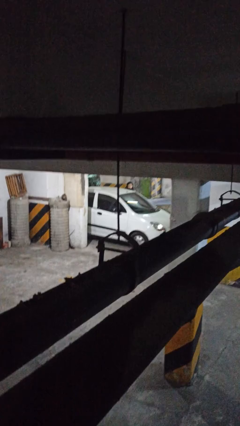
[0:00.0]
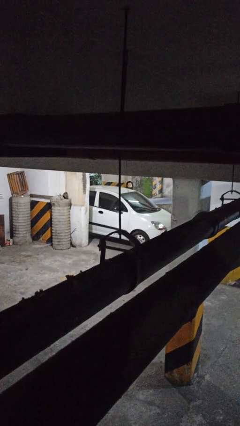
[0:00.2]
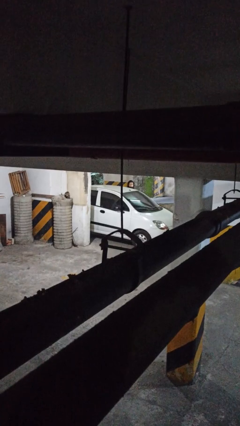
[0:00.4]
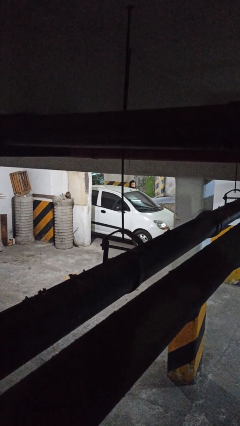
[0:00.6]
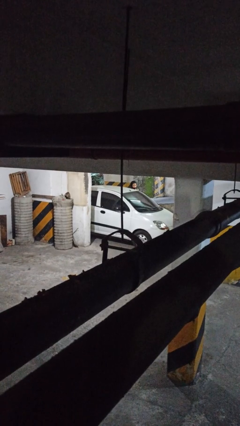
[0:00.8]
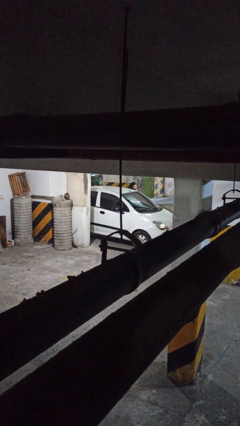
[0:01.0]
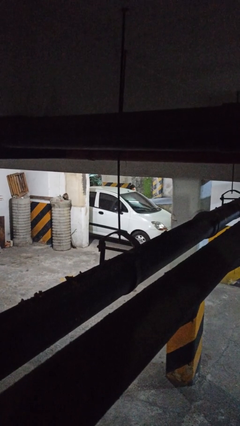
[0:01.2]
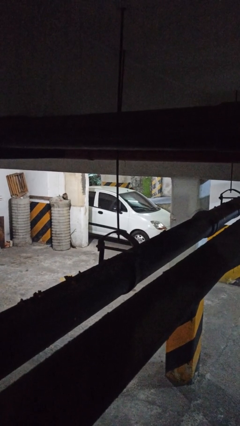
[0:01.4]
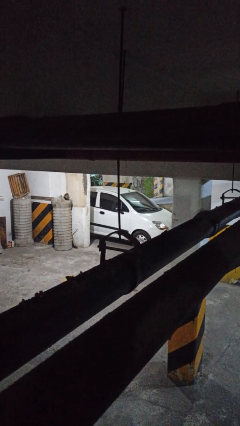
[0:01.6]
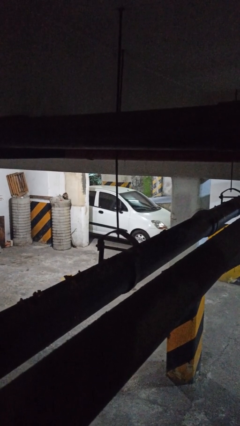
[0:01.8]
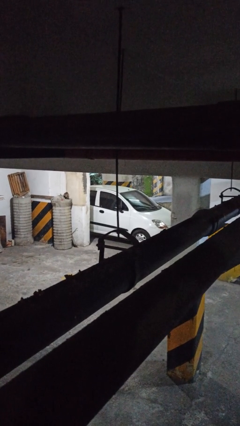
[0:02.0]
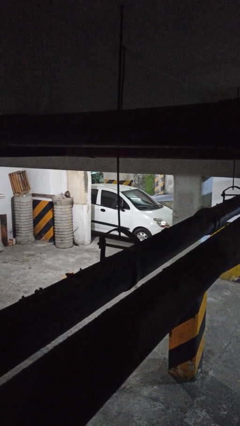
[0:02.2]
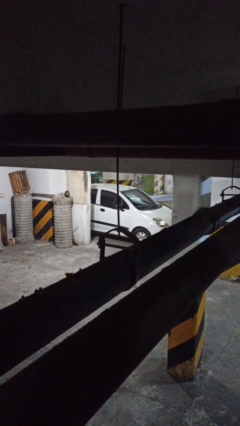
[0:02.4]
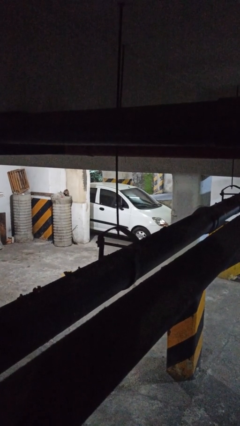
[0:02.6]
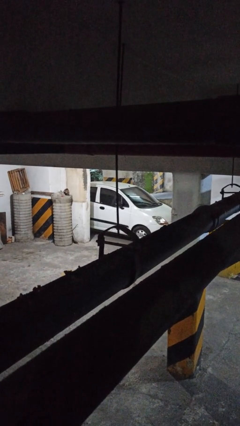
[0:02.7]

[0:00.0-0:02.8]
car picks up person

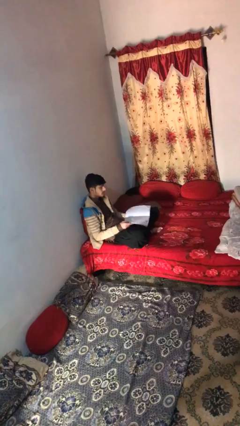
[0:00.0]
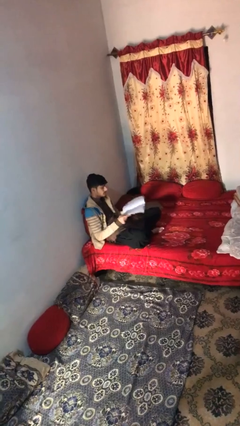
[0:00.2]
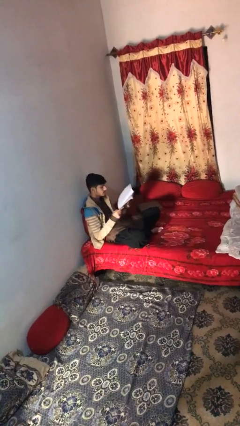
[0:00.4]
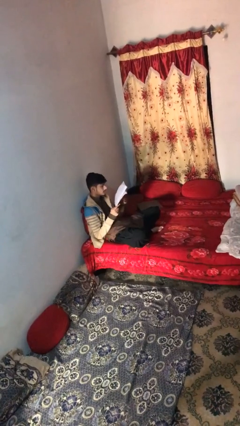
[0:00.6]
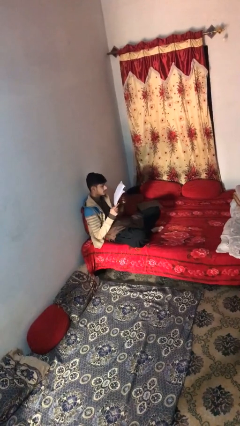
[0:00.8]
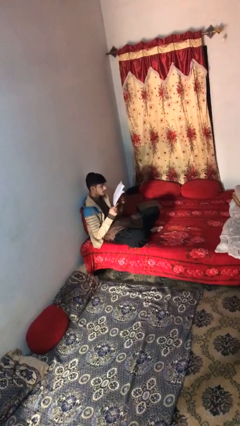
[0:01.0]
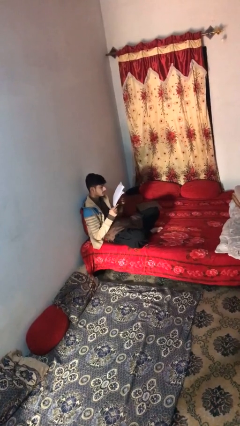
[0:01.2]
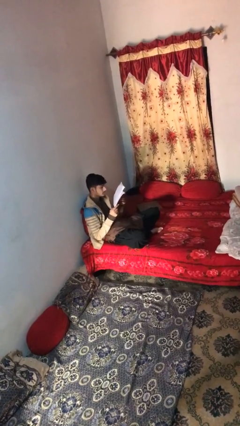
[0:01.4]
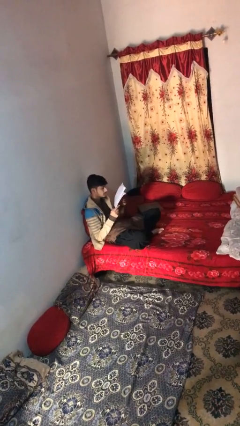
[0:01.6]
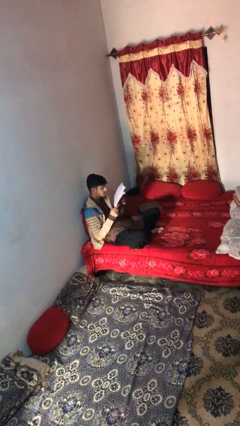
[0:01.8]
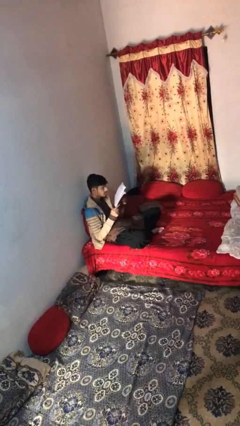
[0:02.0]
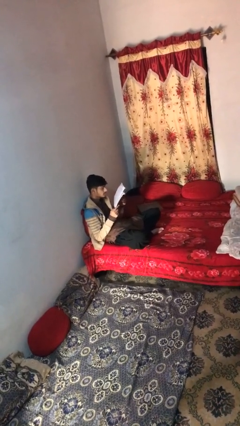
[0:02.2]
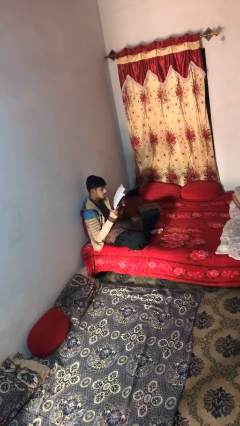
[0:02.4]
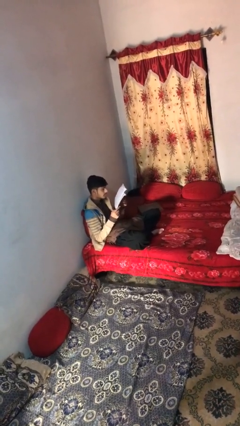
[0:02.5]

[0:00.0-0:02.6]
person reads document

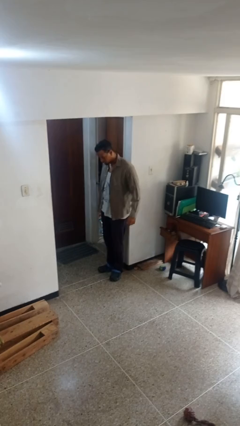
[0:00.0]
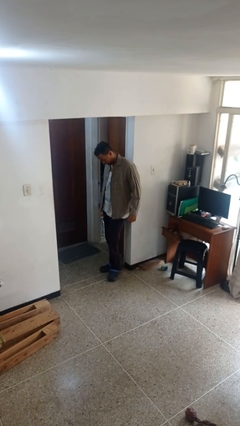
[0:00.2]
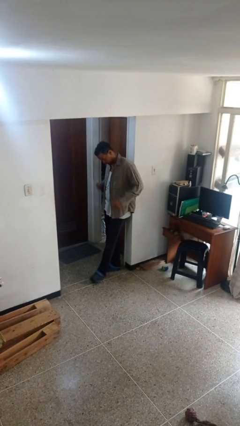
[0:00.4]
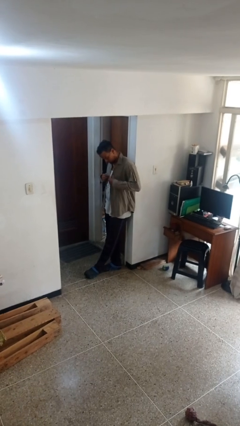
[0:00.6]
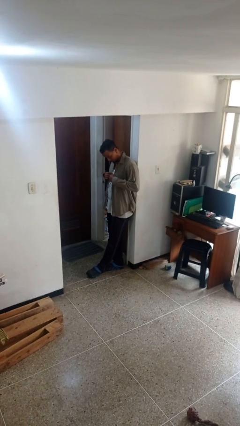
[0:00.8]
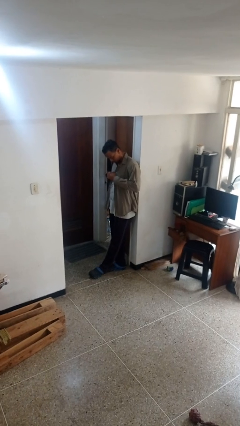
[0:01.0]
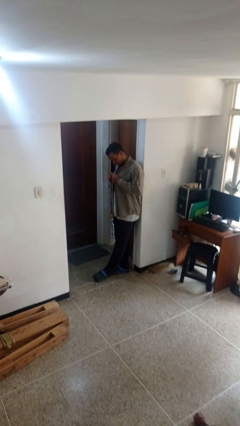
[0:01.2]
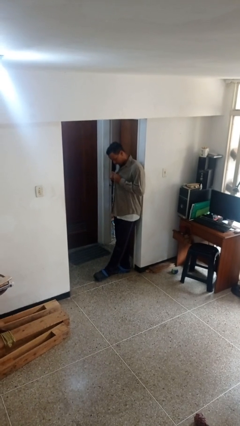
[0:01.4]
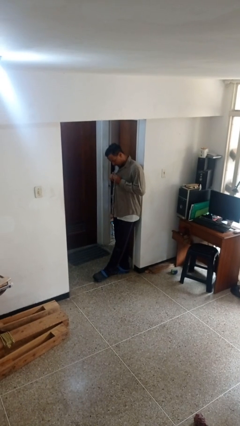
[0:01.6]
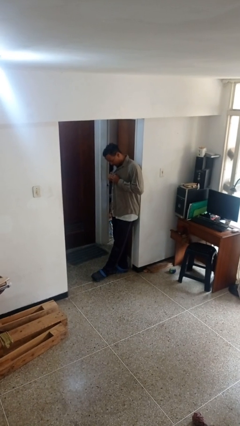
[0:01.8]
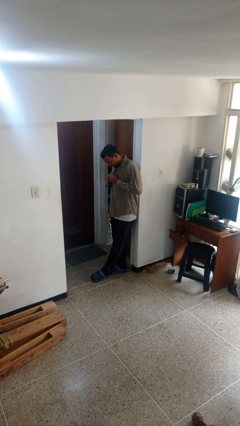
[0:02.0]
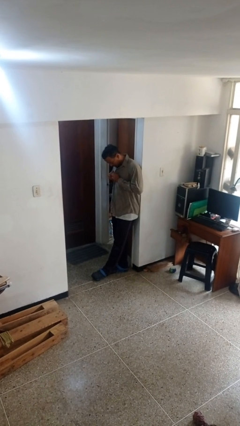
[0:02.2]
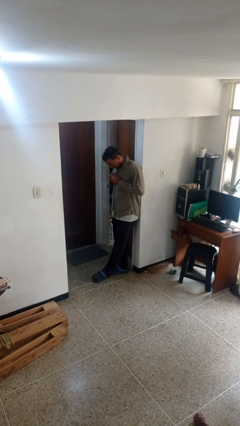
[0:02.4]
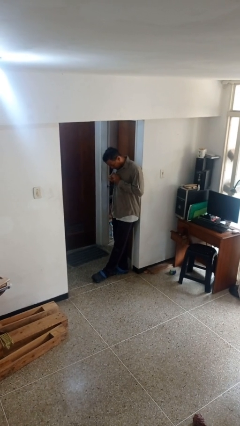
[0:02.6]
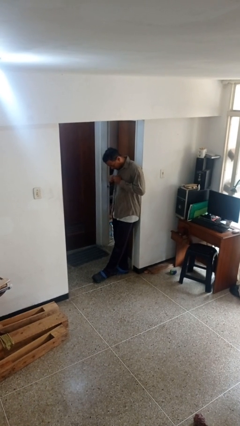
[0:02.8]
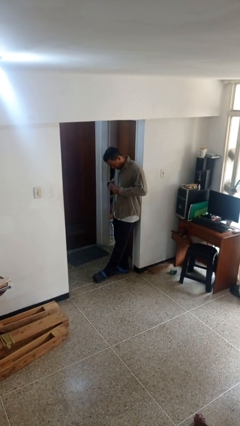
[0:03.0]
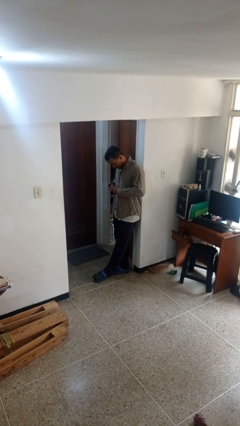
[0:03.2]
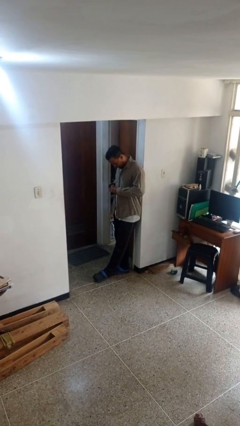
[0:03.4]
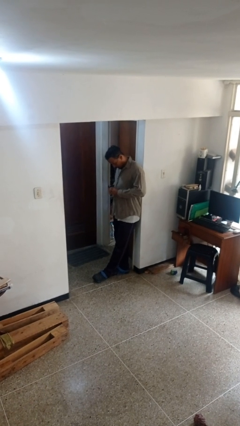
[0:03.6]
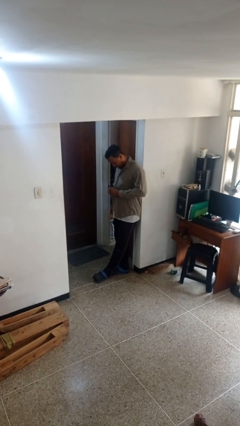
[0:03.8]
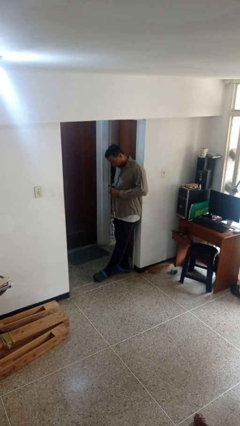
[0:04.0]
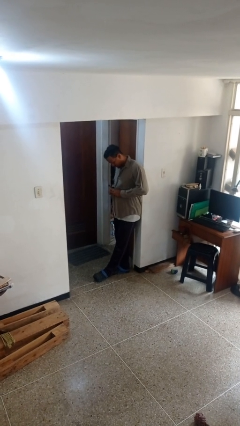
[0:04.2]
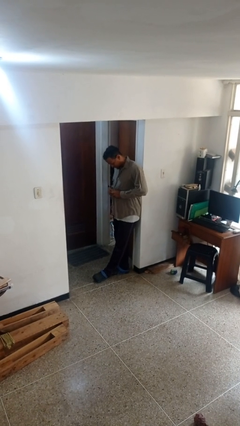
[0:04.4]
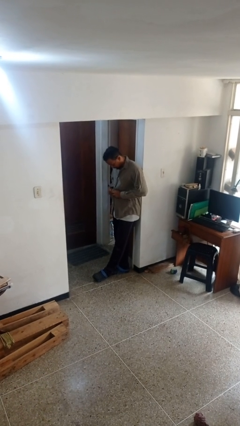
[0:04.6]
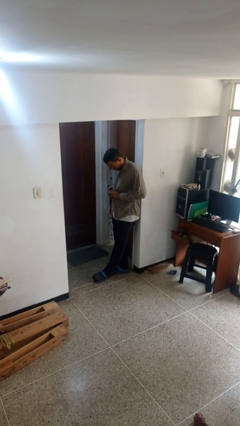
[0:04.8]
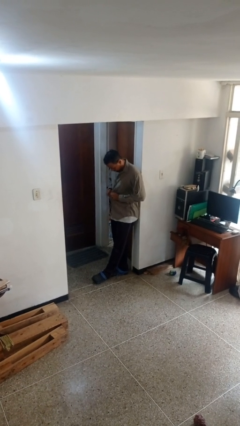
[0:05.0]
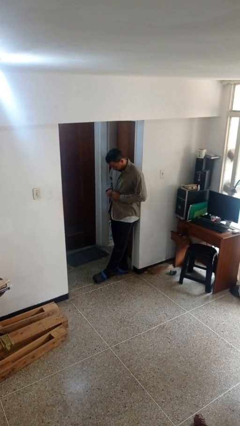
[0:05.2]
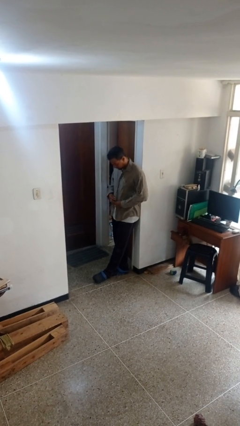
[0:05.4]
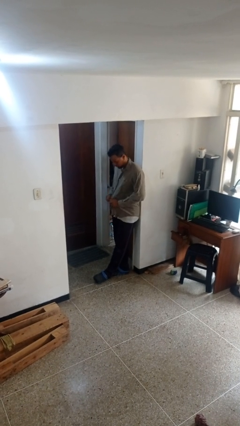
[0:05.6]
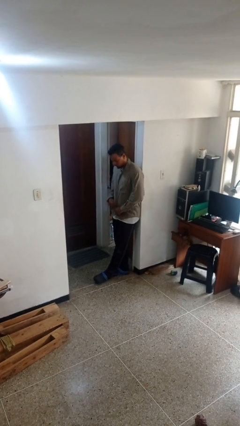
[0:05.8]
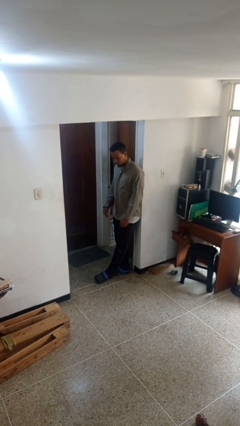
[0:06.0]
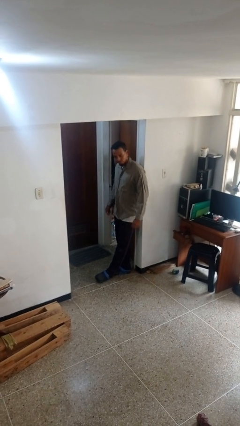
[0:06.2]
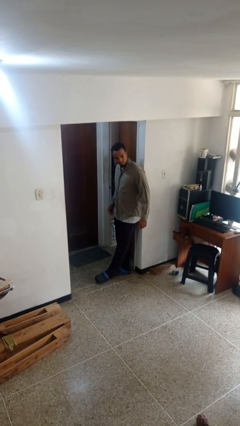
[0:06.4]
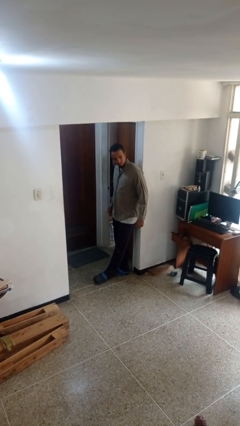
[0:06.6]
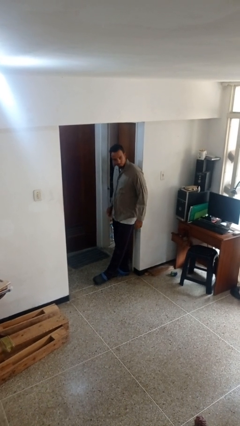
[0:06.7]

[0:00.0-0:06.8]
person buttons shirt

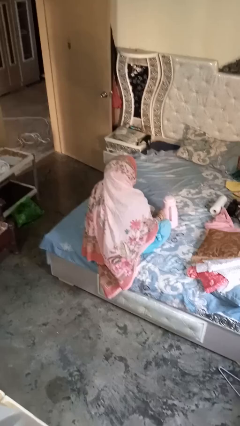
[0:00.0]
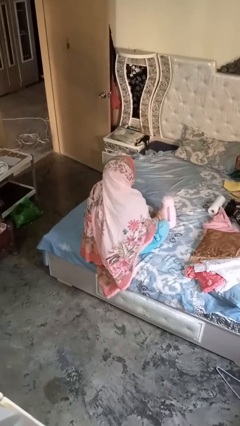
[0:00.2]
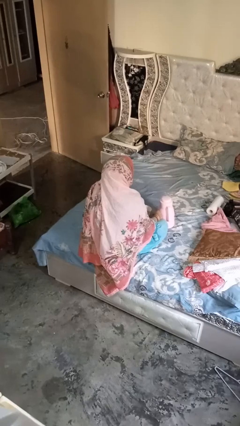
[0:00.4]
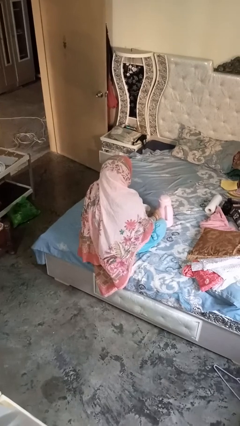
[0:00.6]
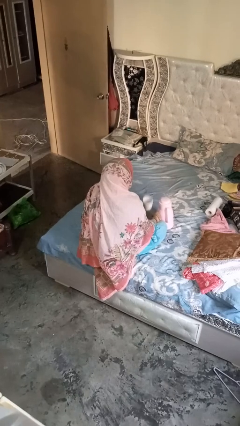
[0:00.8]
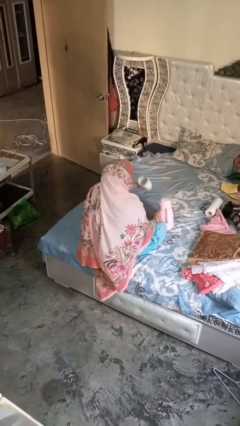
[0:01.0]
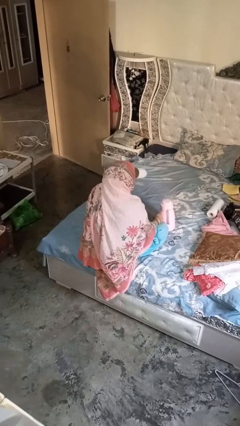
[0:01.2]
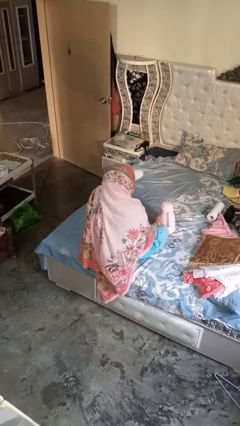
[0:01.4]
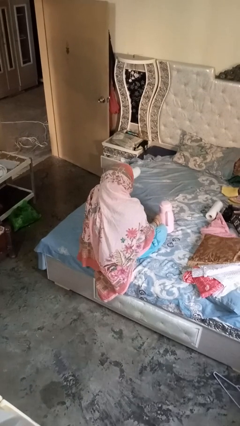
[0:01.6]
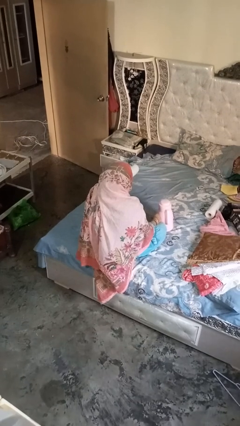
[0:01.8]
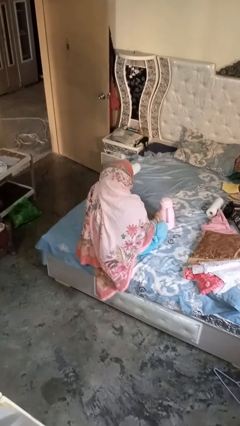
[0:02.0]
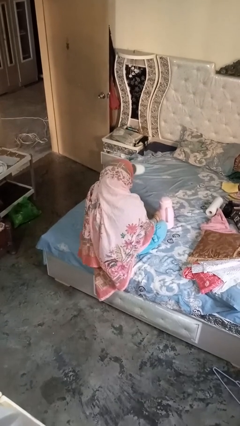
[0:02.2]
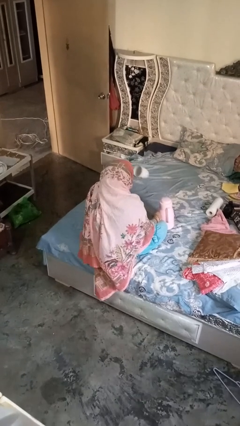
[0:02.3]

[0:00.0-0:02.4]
person pours coffee into mug

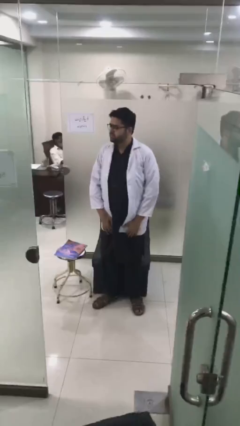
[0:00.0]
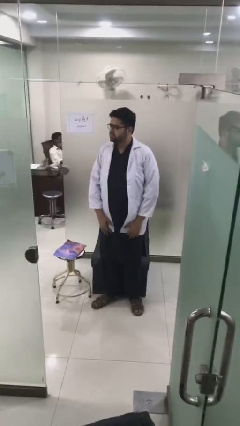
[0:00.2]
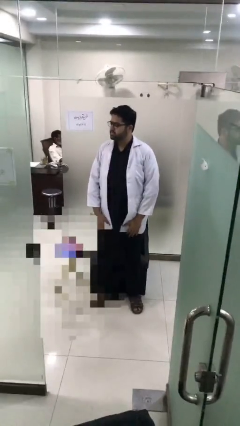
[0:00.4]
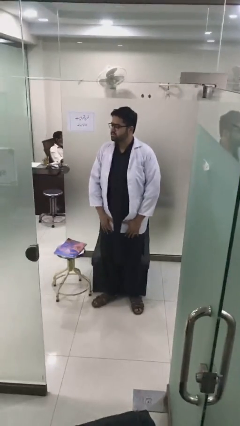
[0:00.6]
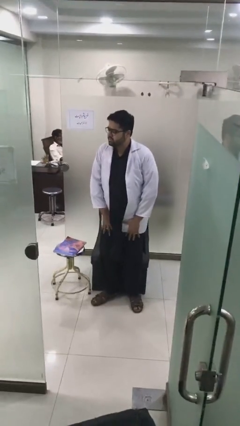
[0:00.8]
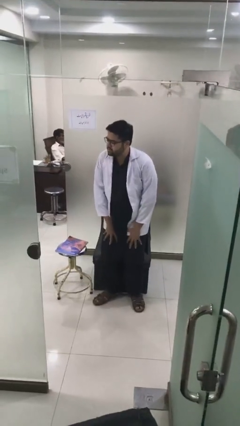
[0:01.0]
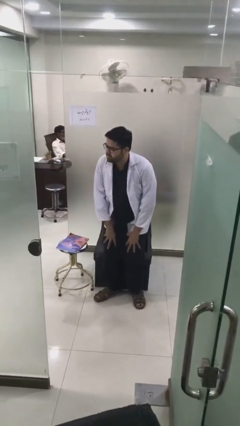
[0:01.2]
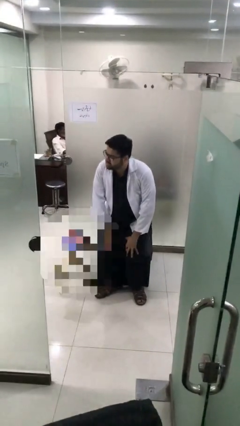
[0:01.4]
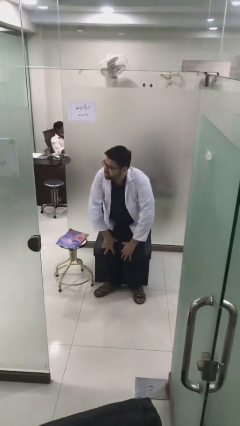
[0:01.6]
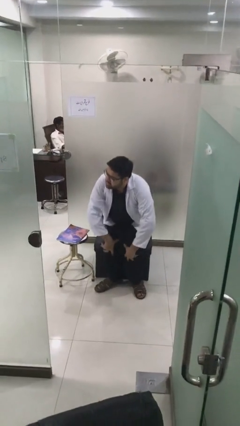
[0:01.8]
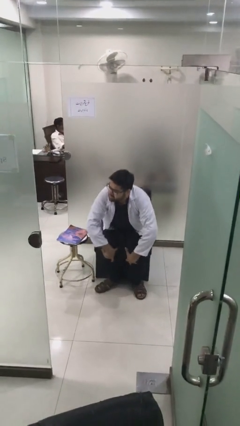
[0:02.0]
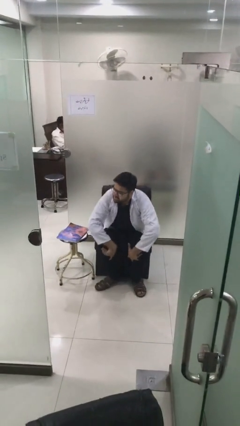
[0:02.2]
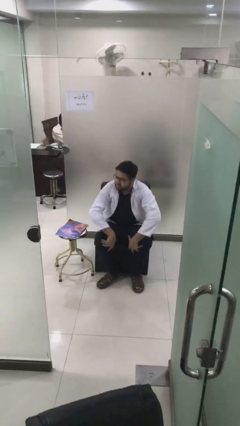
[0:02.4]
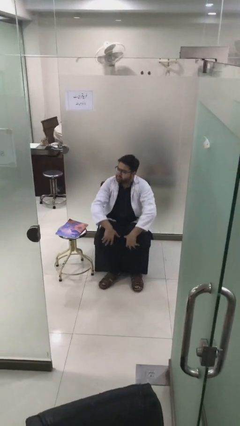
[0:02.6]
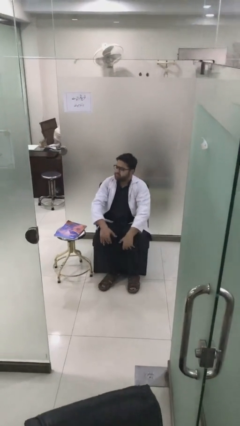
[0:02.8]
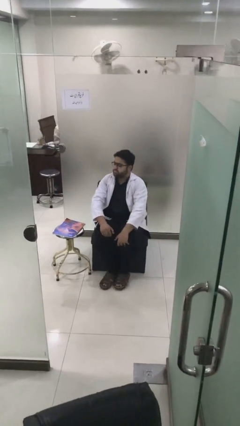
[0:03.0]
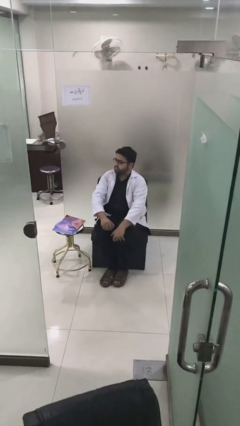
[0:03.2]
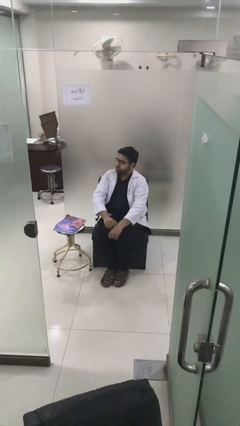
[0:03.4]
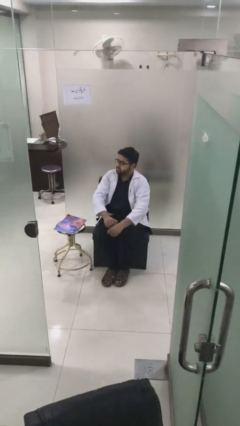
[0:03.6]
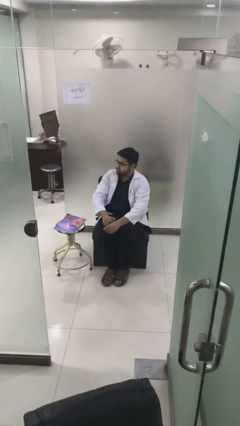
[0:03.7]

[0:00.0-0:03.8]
person sits down
